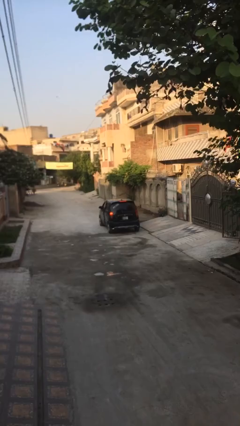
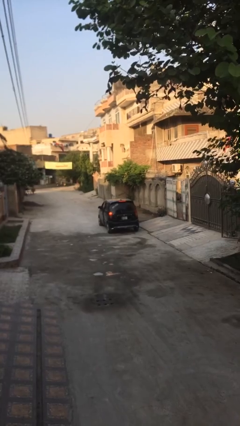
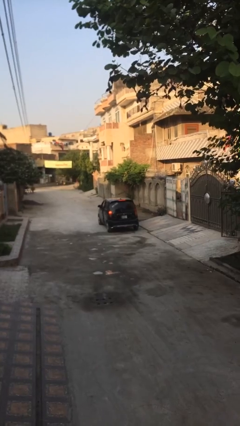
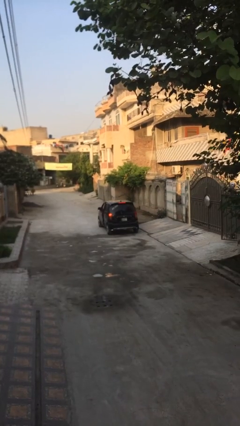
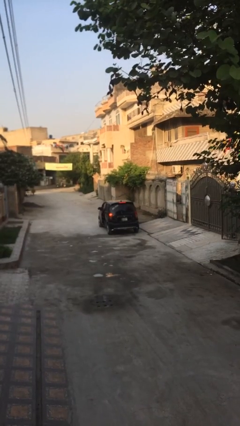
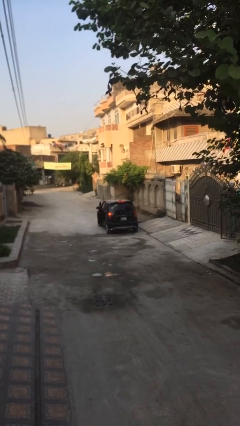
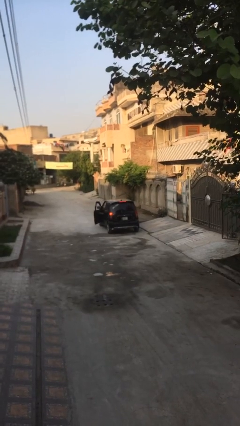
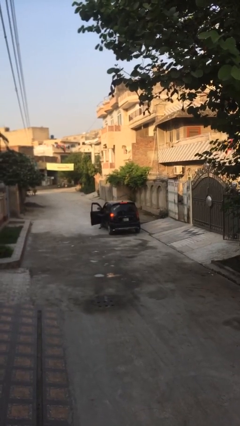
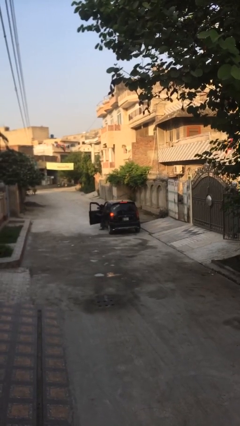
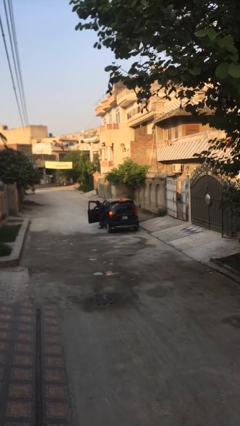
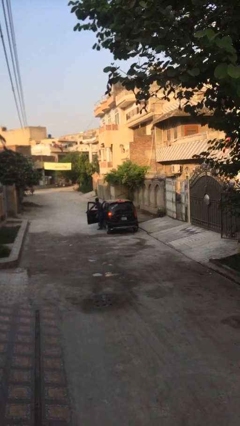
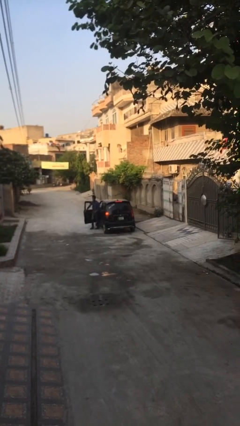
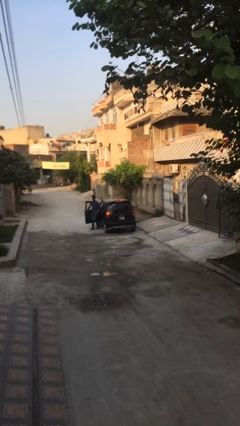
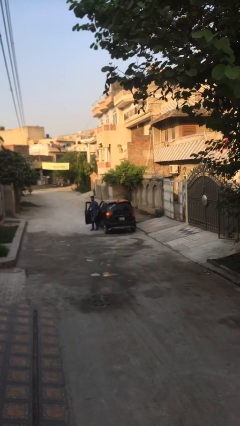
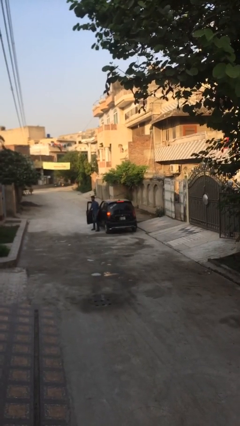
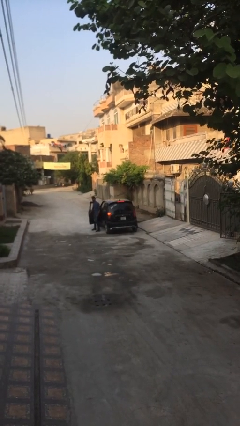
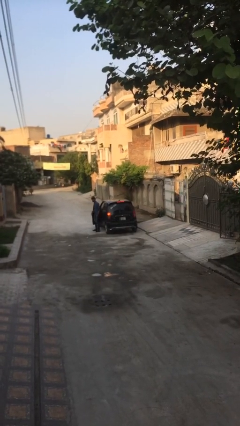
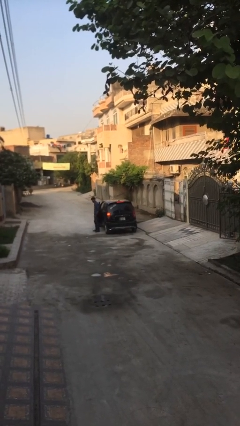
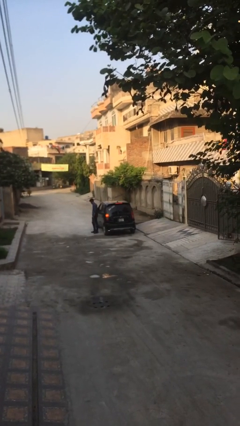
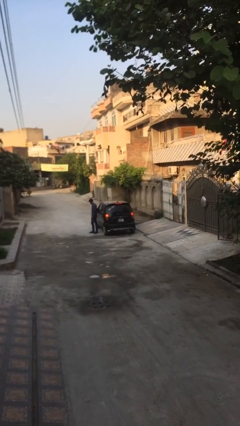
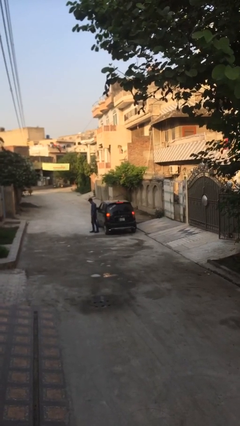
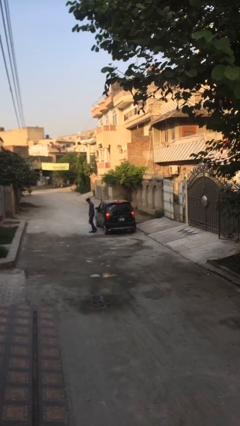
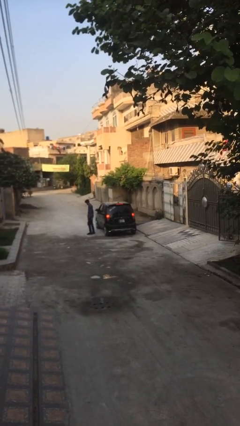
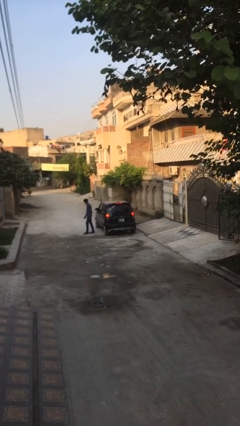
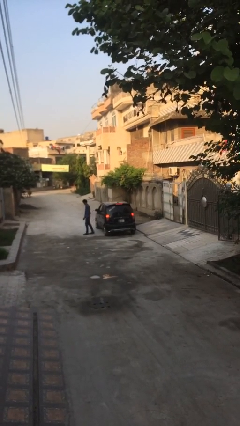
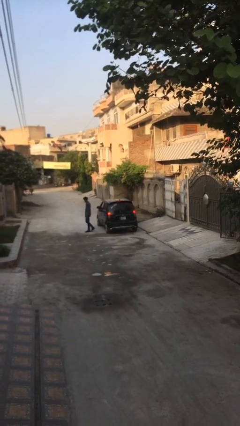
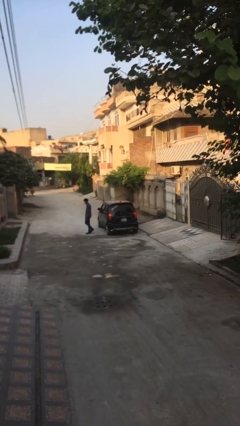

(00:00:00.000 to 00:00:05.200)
car drops off person

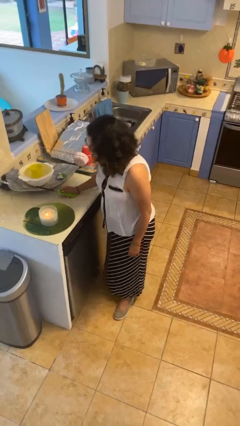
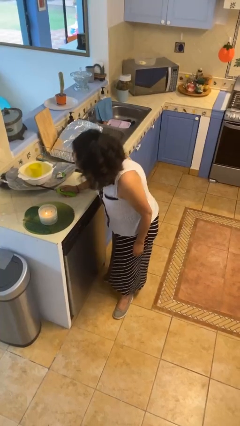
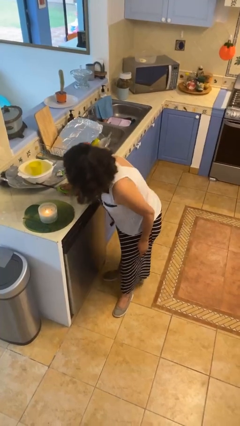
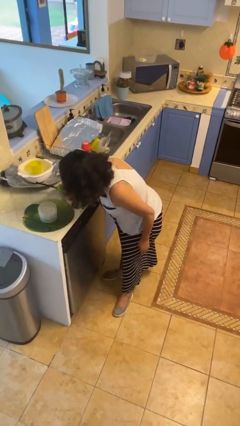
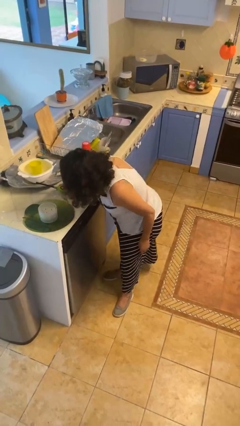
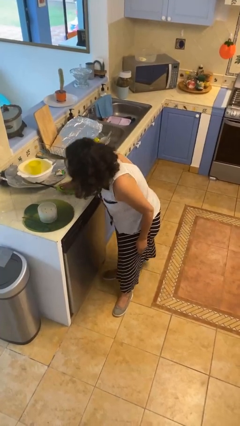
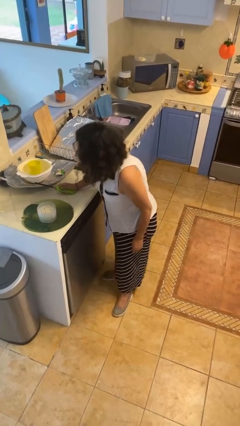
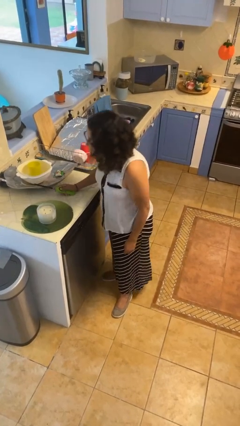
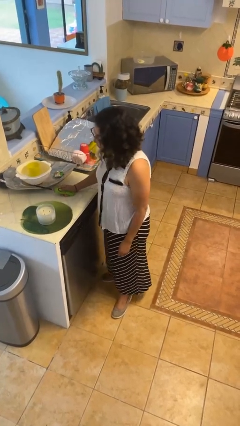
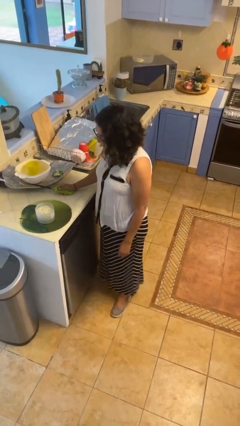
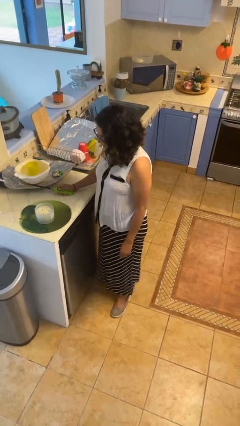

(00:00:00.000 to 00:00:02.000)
person extinguishes candle

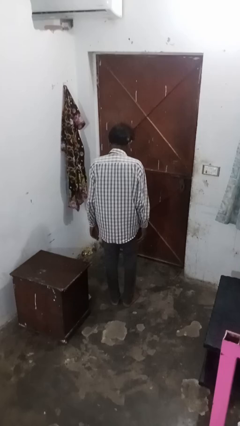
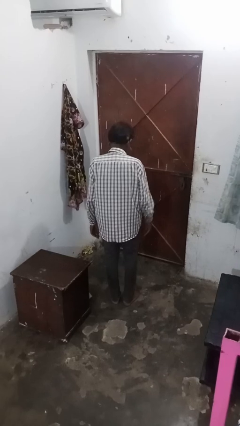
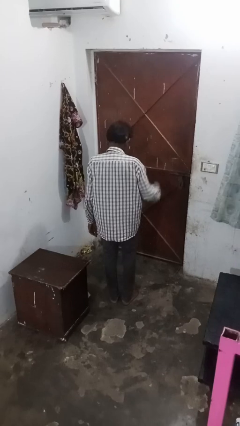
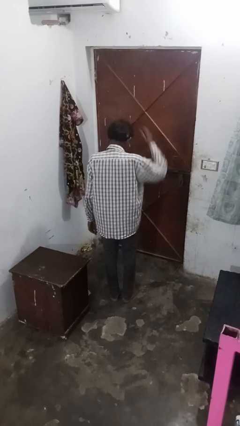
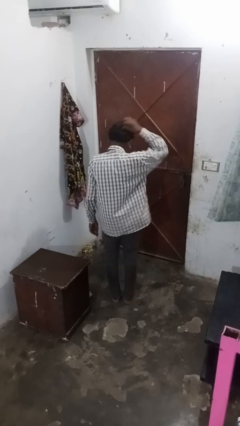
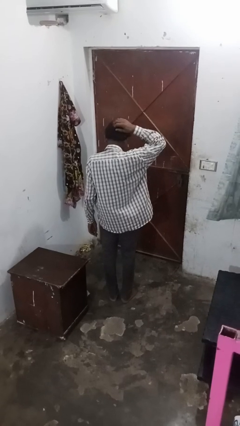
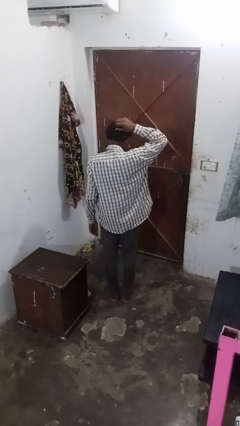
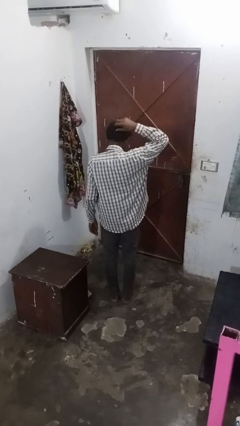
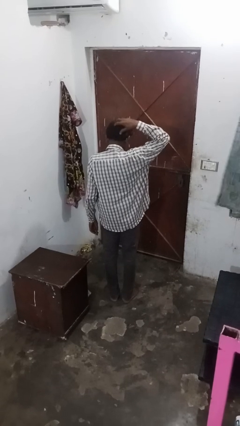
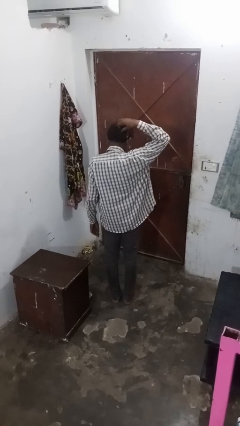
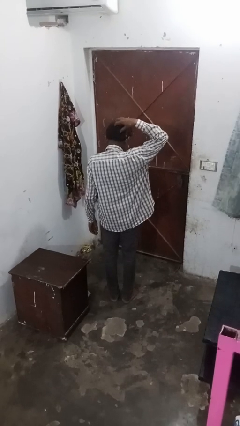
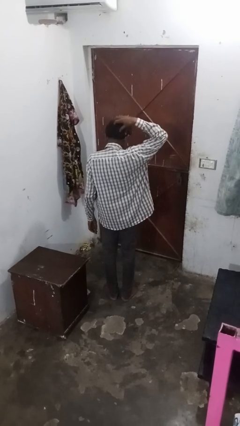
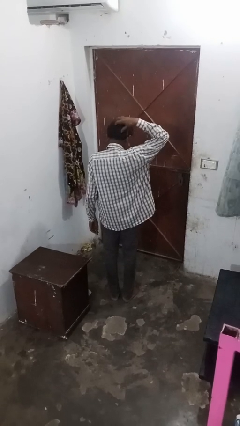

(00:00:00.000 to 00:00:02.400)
person strokes hair

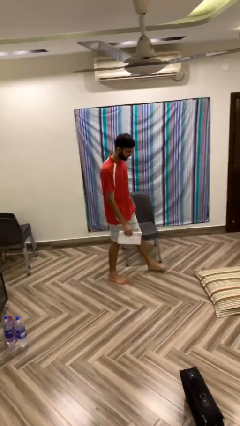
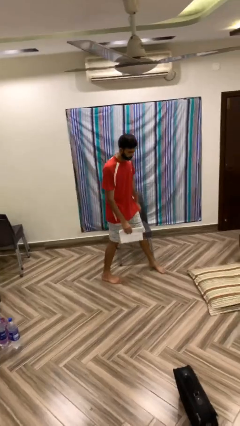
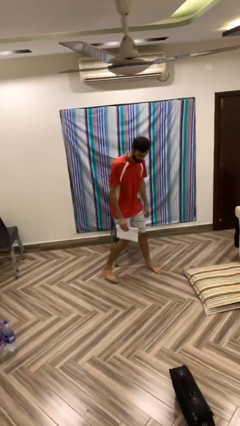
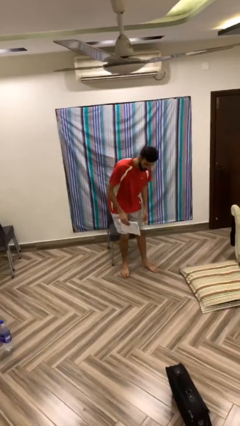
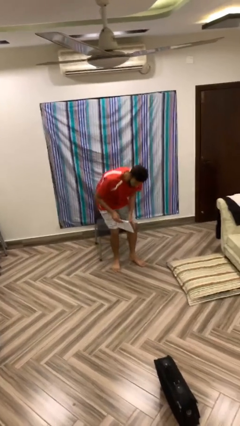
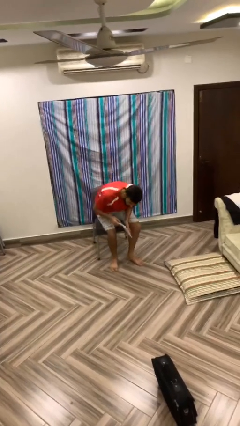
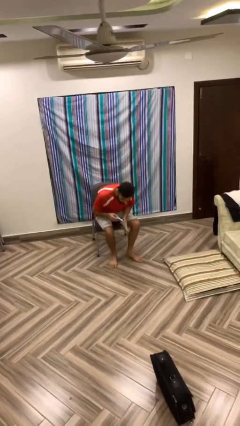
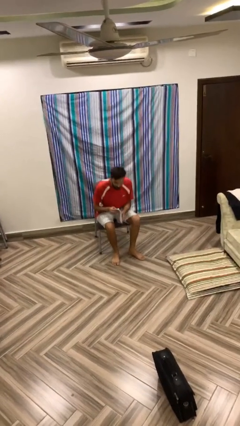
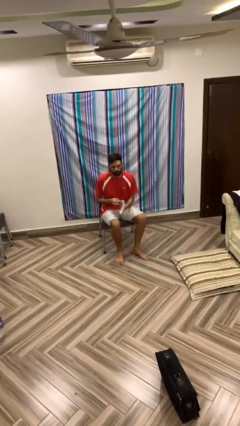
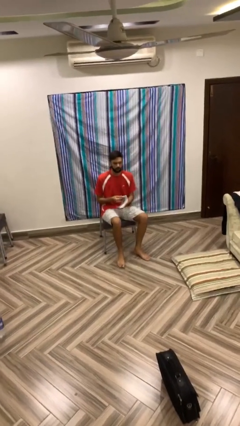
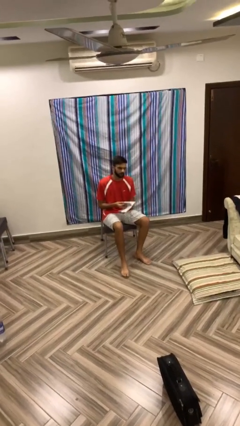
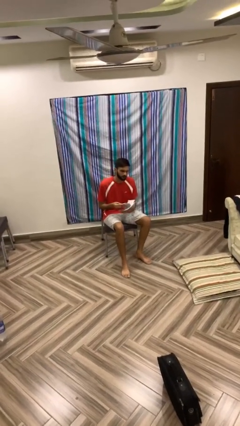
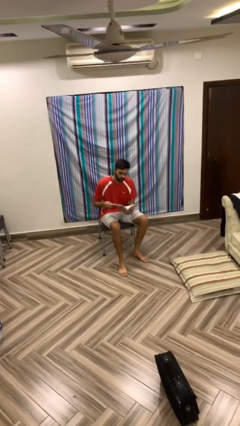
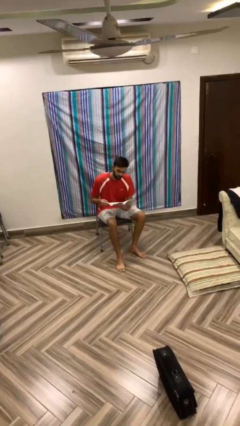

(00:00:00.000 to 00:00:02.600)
person sits down

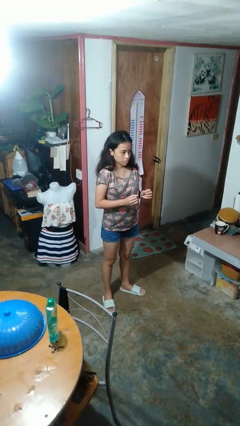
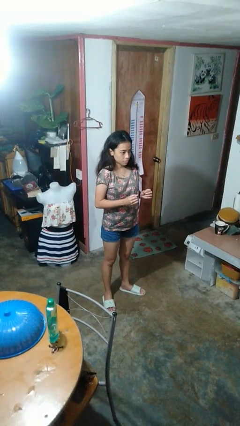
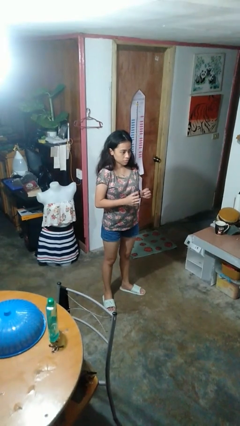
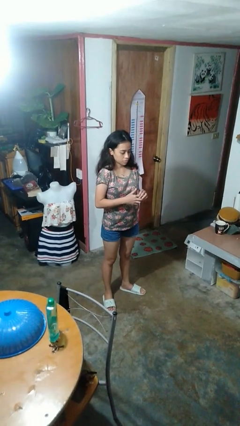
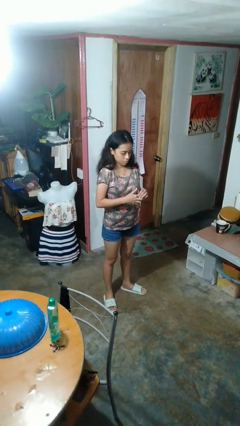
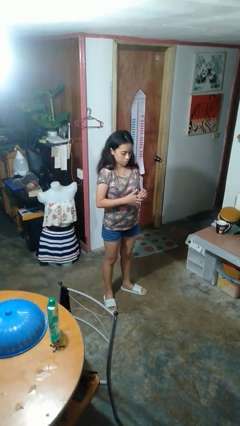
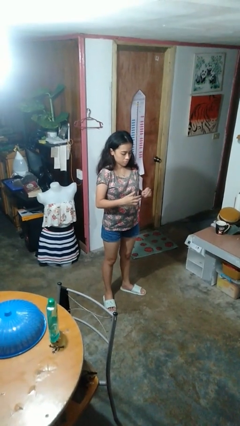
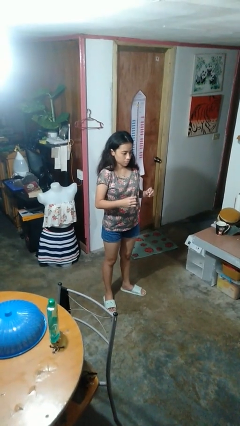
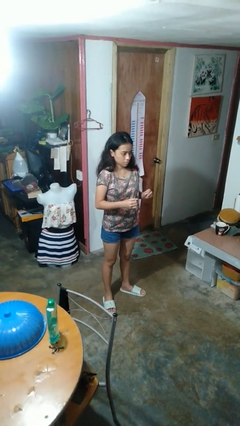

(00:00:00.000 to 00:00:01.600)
person takes off ring

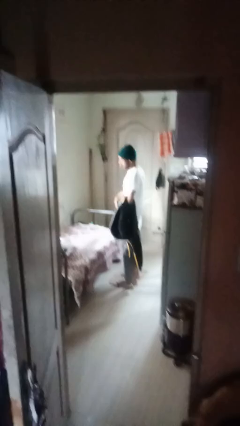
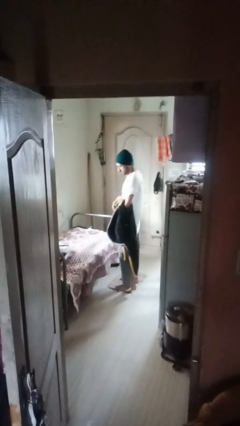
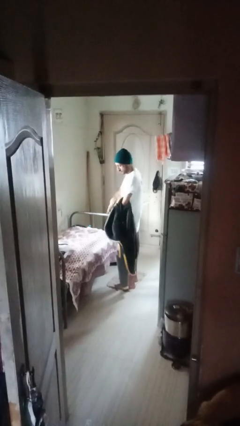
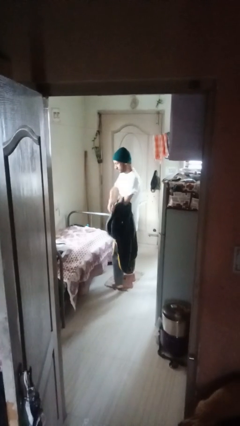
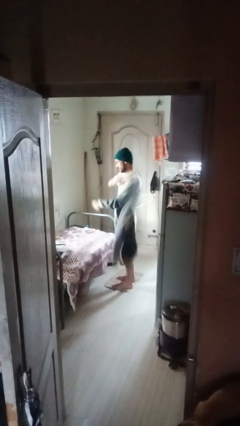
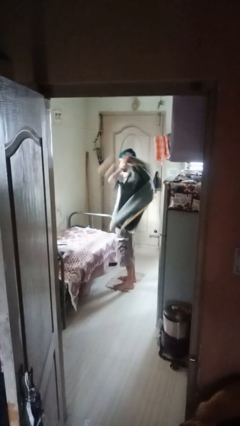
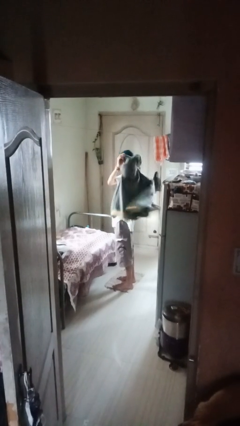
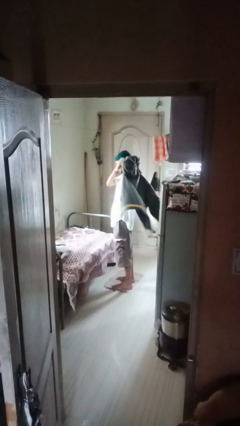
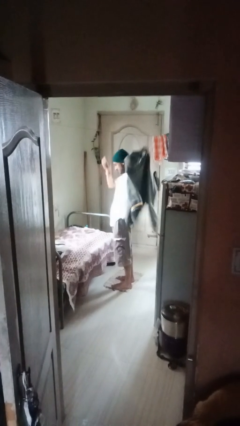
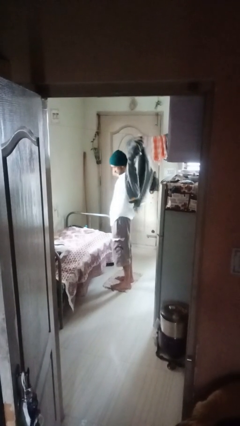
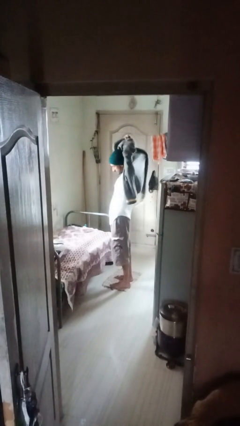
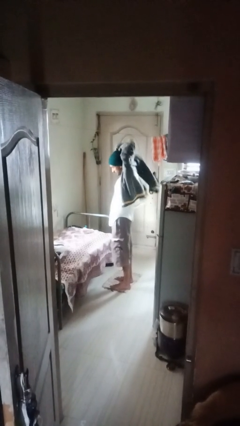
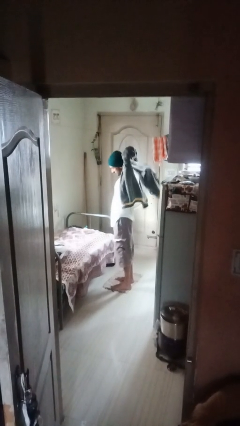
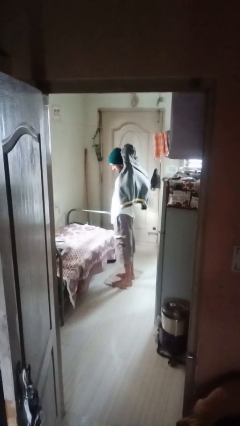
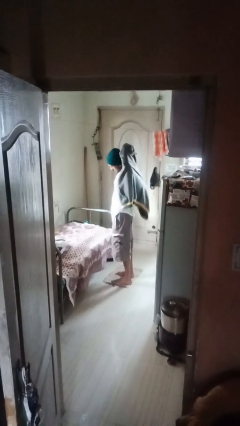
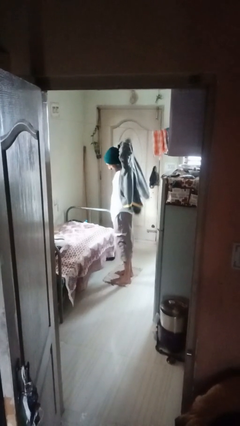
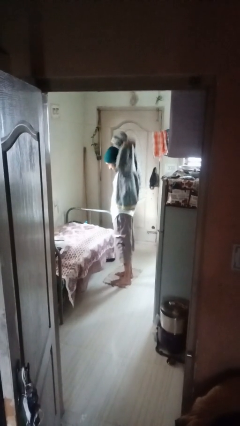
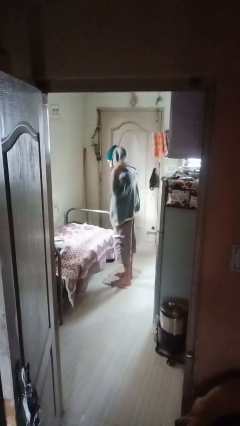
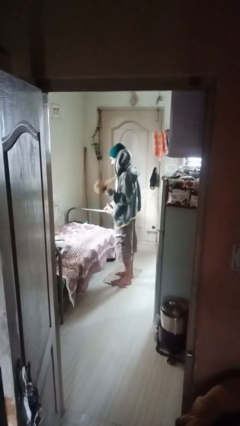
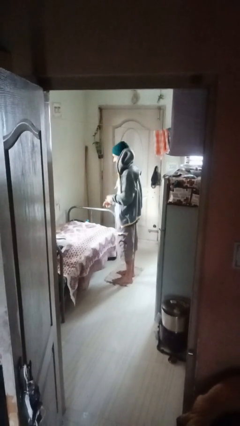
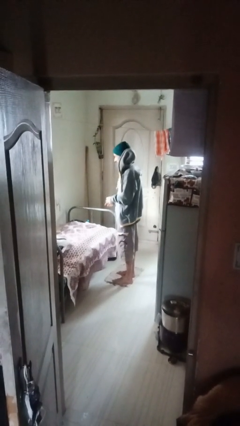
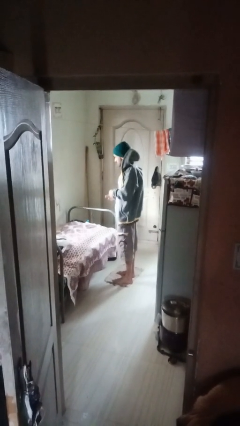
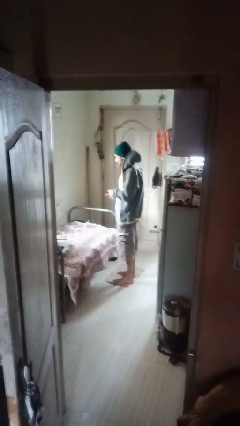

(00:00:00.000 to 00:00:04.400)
person puts on shirt
